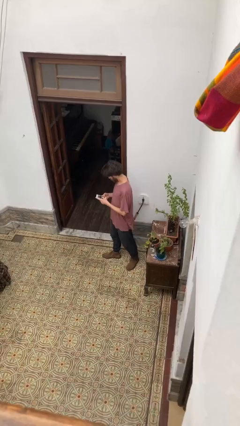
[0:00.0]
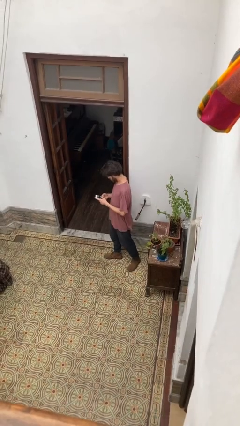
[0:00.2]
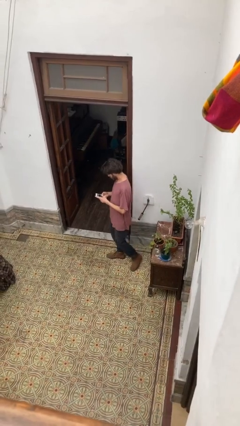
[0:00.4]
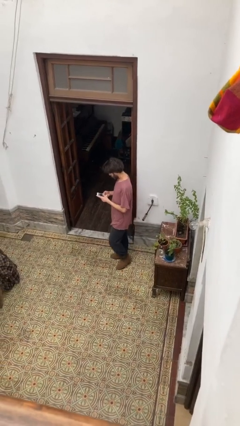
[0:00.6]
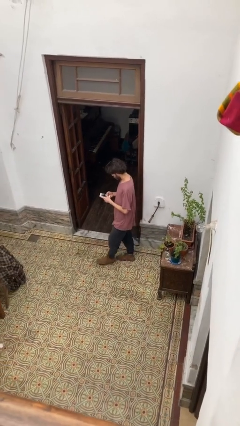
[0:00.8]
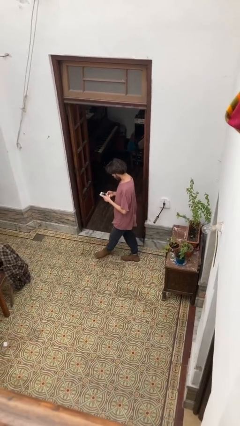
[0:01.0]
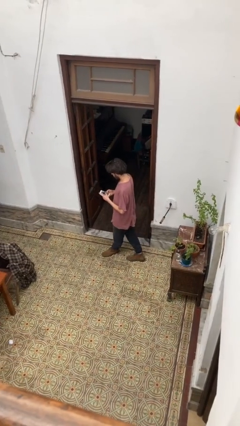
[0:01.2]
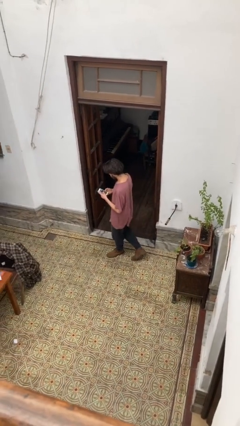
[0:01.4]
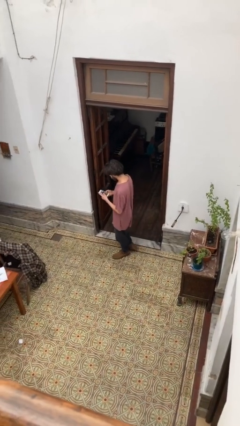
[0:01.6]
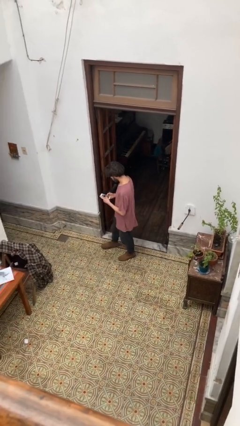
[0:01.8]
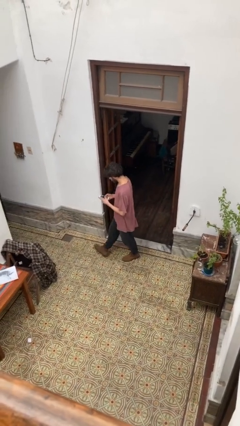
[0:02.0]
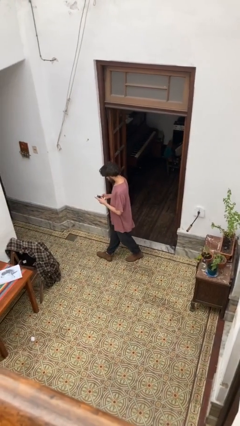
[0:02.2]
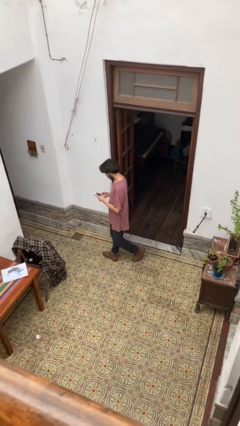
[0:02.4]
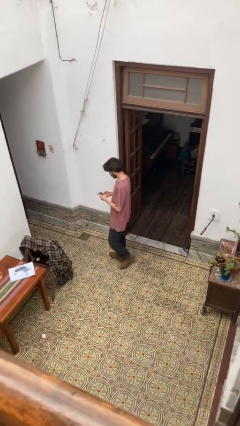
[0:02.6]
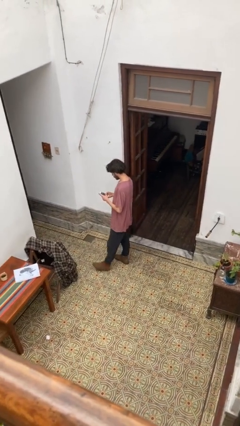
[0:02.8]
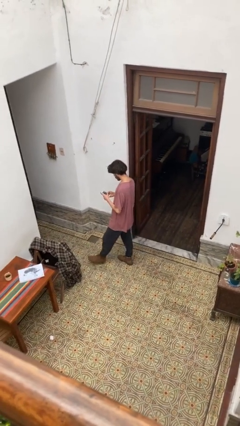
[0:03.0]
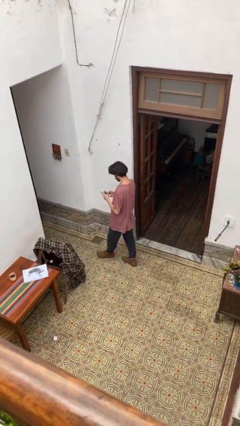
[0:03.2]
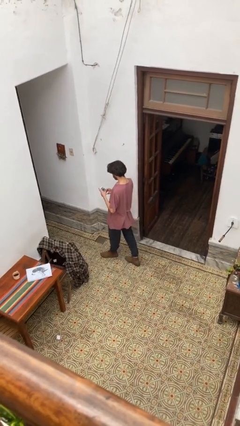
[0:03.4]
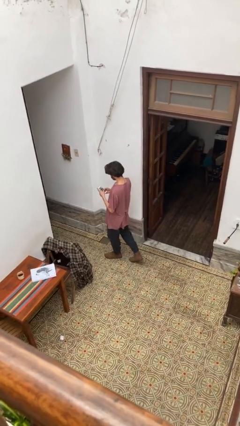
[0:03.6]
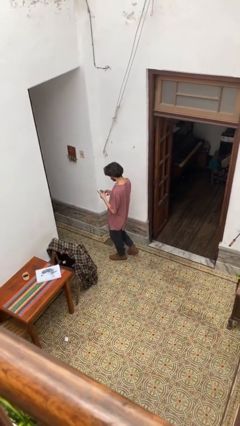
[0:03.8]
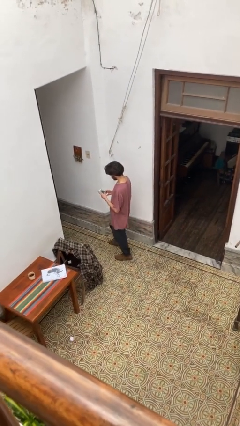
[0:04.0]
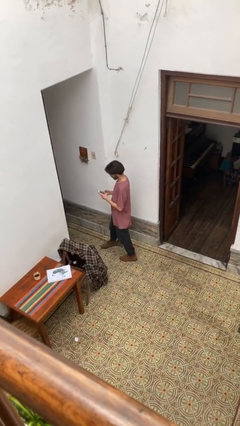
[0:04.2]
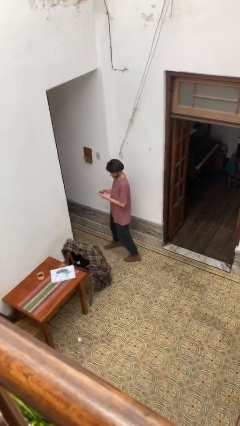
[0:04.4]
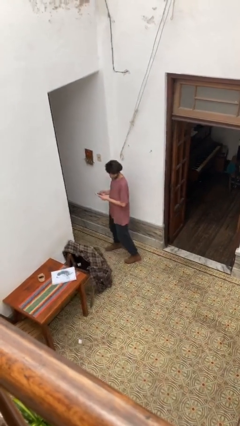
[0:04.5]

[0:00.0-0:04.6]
person texts on phone

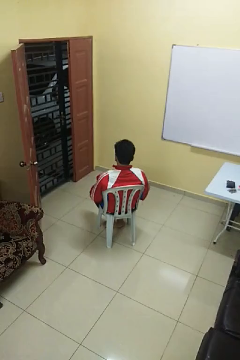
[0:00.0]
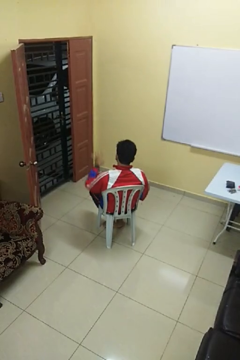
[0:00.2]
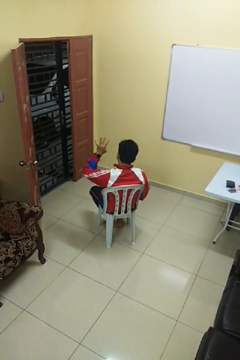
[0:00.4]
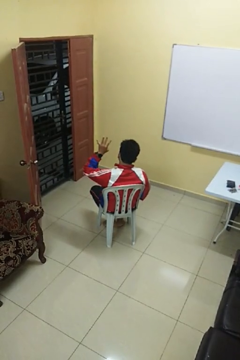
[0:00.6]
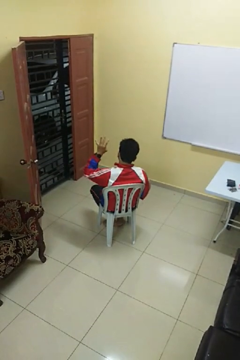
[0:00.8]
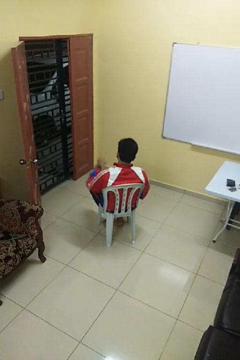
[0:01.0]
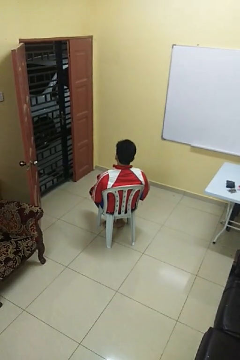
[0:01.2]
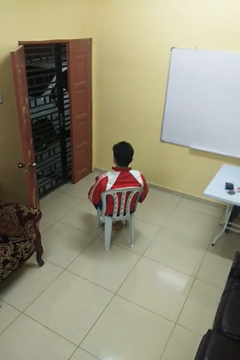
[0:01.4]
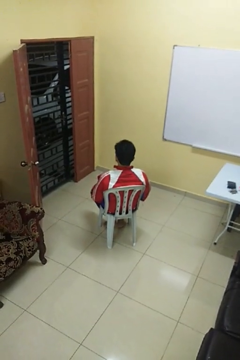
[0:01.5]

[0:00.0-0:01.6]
person gestures number four

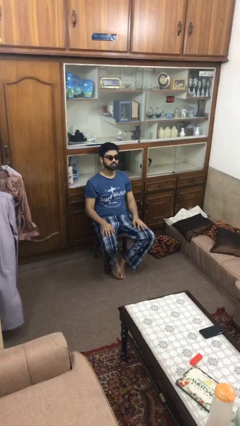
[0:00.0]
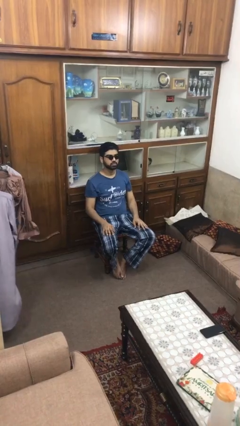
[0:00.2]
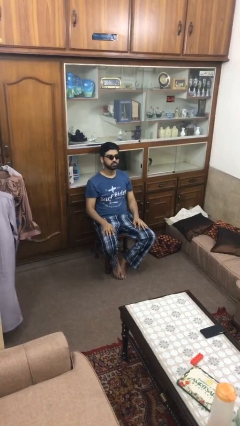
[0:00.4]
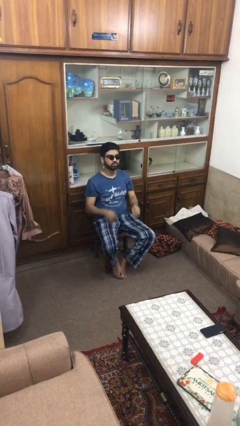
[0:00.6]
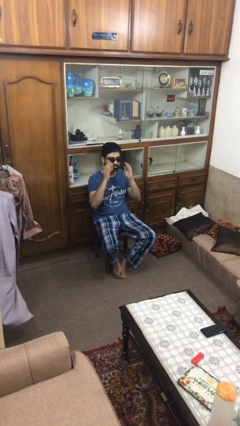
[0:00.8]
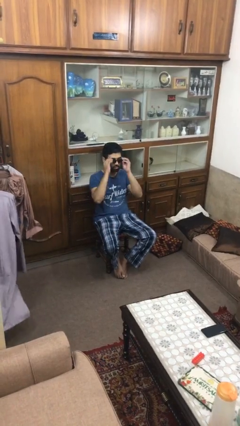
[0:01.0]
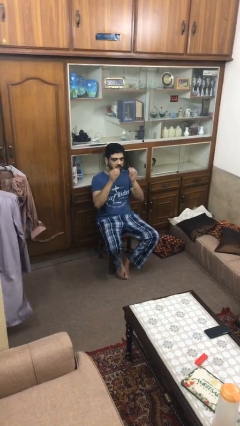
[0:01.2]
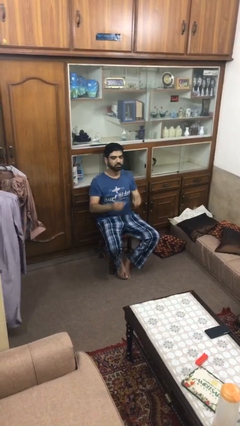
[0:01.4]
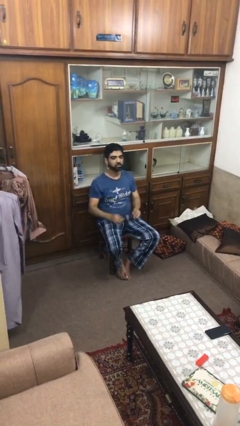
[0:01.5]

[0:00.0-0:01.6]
person takes off sunglasses

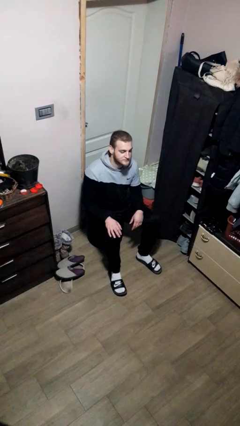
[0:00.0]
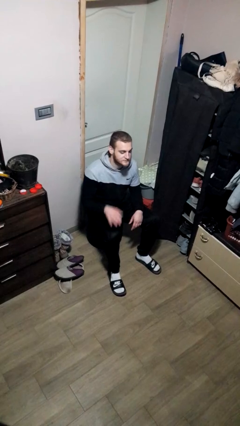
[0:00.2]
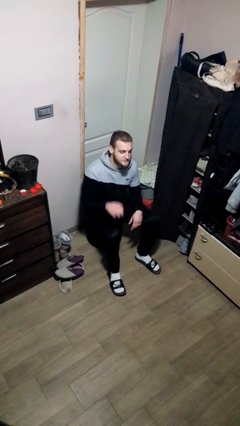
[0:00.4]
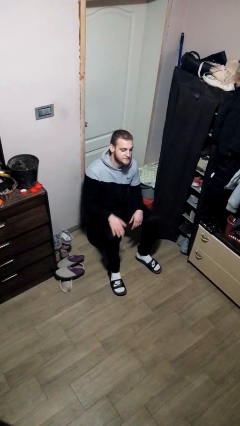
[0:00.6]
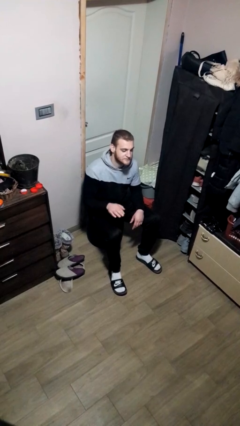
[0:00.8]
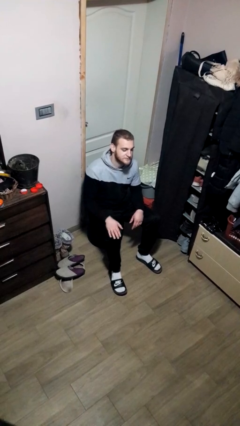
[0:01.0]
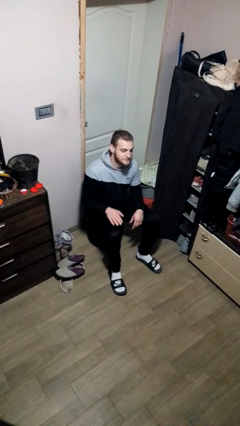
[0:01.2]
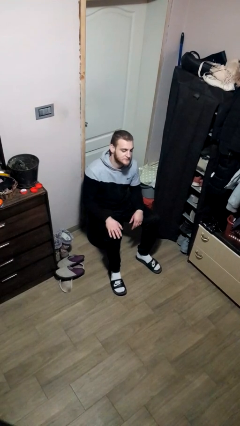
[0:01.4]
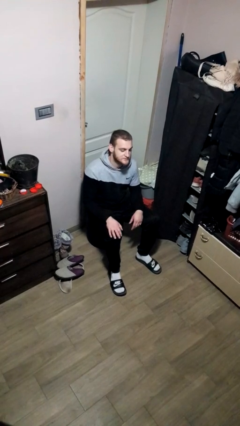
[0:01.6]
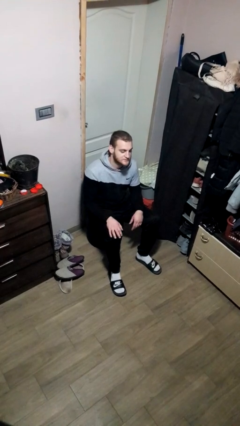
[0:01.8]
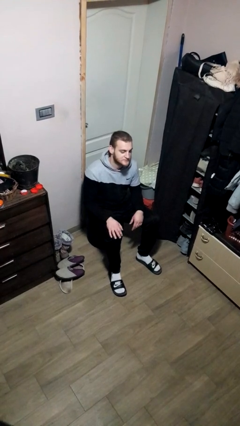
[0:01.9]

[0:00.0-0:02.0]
person slaps hands on thighs

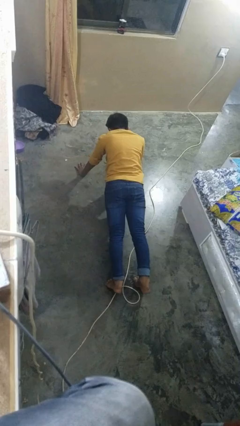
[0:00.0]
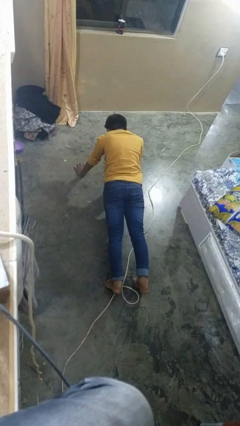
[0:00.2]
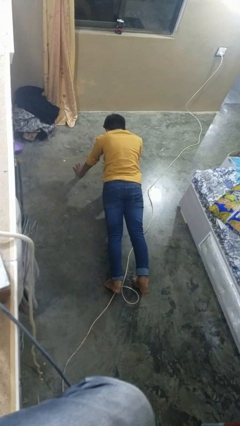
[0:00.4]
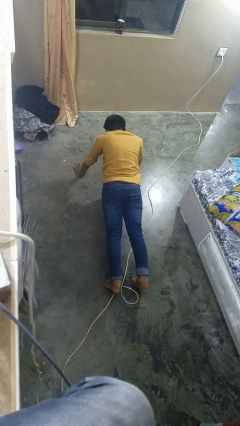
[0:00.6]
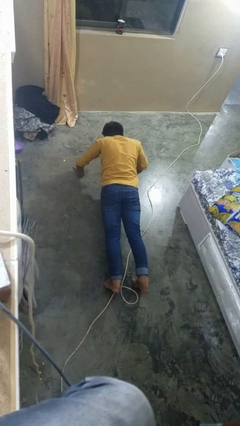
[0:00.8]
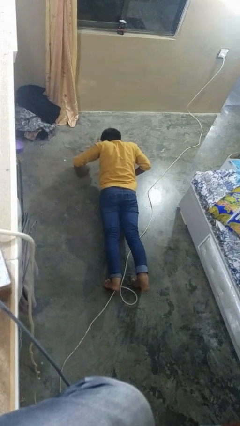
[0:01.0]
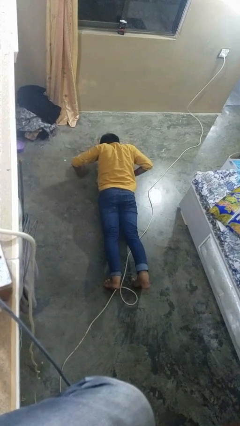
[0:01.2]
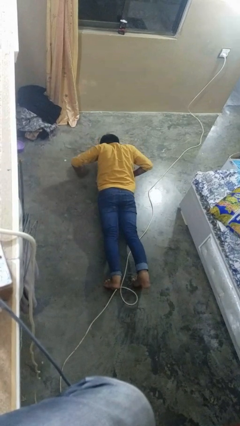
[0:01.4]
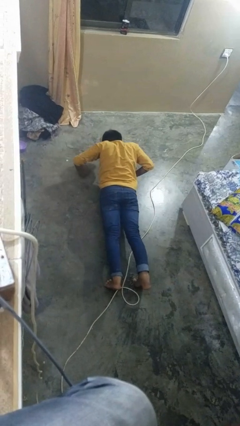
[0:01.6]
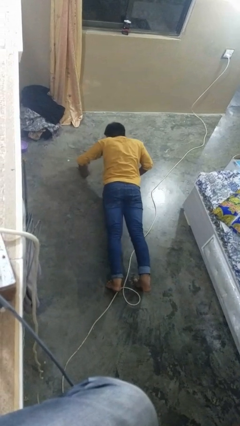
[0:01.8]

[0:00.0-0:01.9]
person exercises with pushup

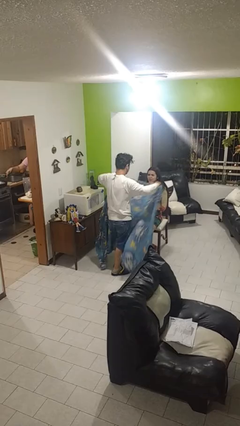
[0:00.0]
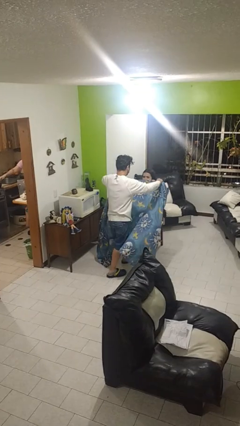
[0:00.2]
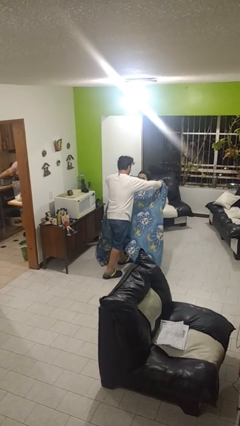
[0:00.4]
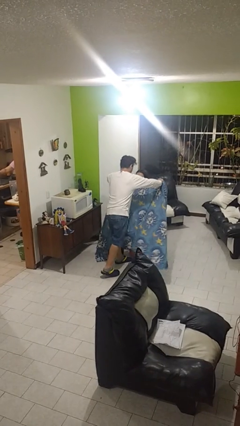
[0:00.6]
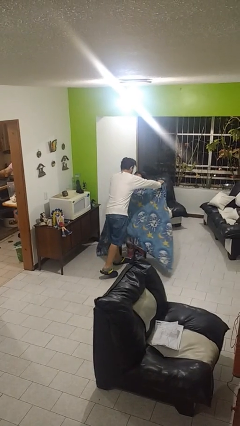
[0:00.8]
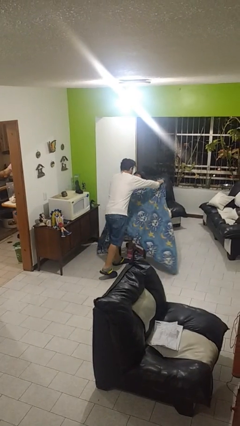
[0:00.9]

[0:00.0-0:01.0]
person covers friend with blanket

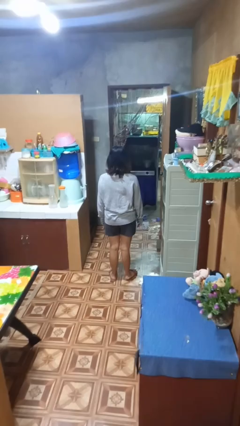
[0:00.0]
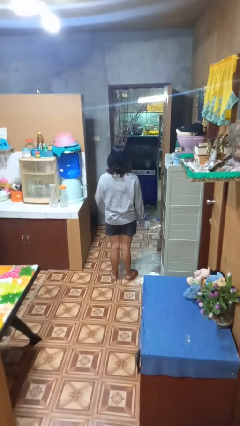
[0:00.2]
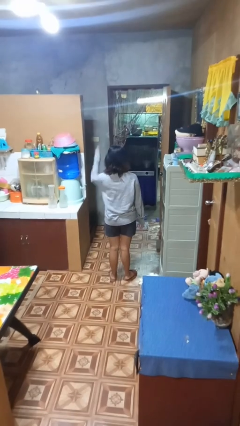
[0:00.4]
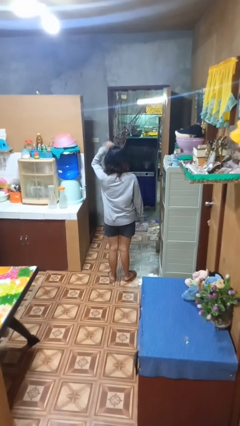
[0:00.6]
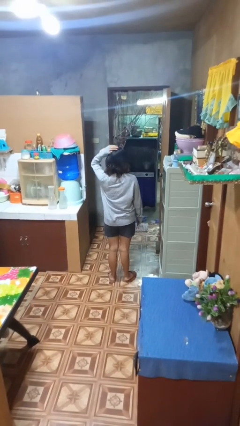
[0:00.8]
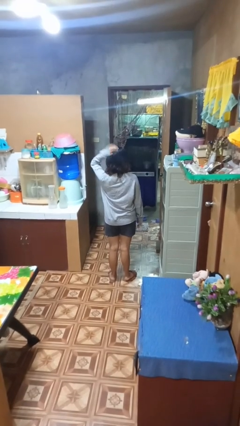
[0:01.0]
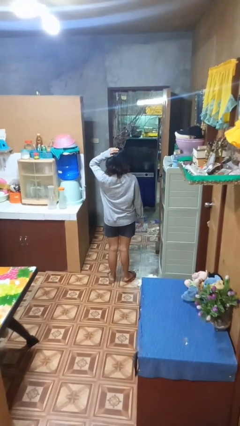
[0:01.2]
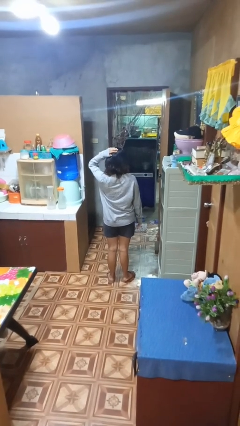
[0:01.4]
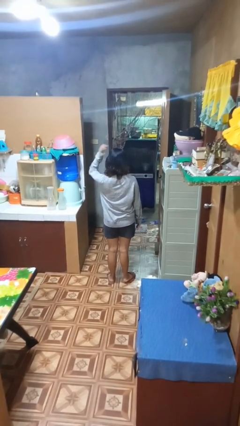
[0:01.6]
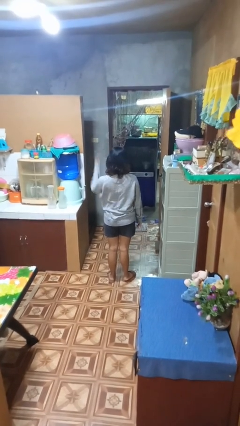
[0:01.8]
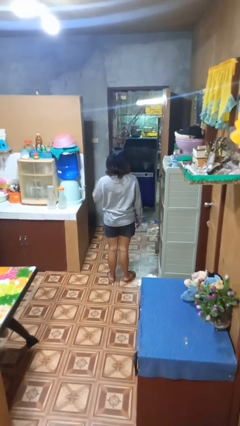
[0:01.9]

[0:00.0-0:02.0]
person pats head

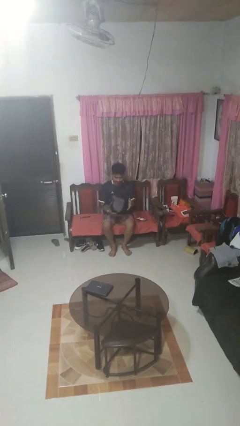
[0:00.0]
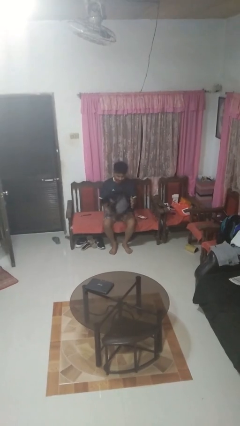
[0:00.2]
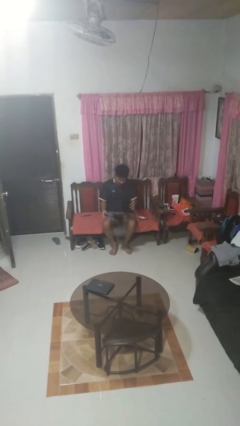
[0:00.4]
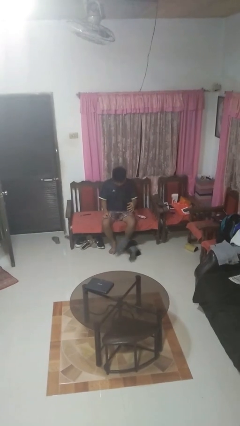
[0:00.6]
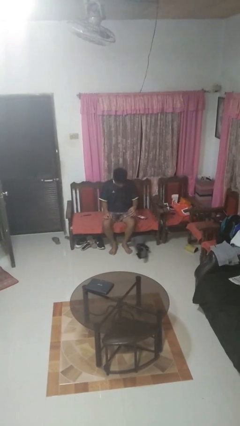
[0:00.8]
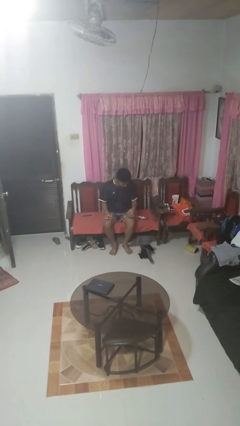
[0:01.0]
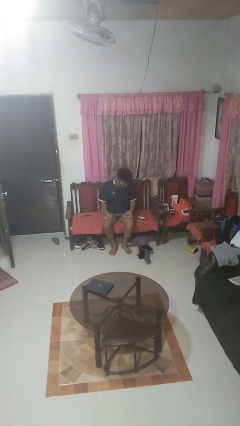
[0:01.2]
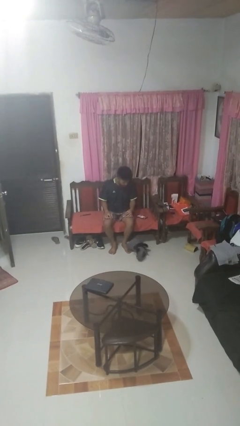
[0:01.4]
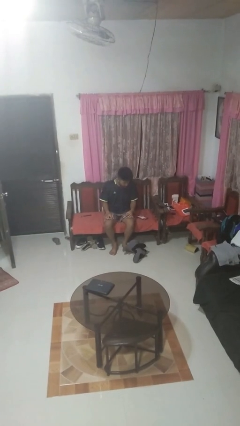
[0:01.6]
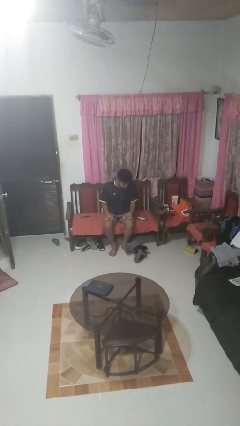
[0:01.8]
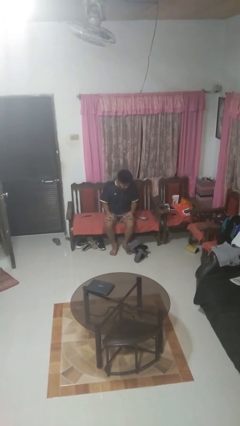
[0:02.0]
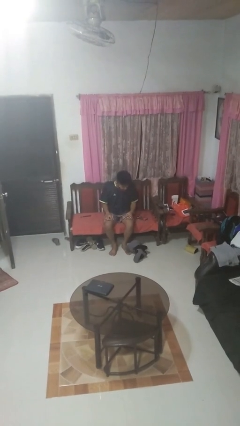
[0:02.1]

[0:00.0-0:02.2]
person drops object

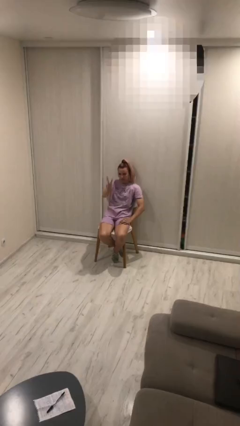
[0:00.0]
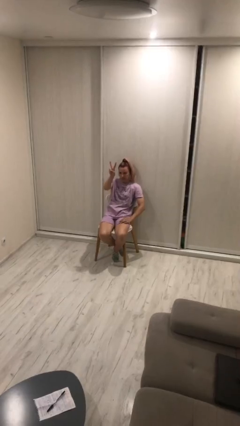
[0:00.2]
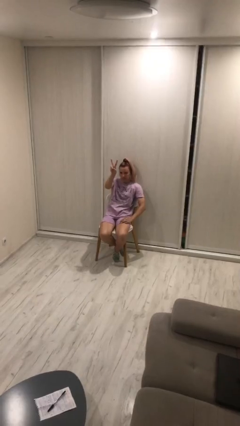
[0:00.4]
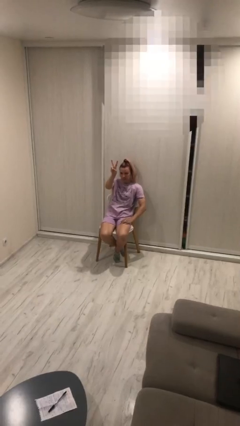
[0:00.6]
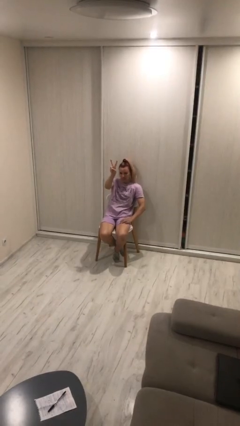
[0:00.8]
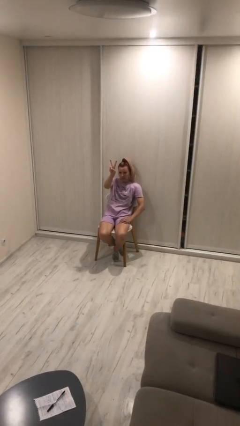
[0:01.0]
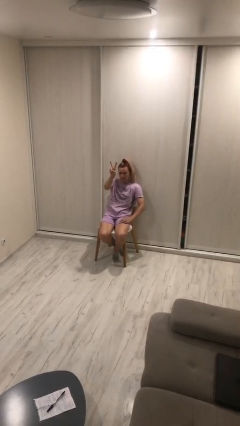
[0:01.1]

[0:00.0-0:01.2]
person gestures peace
